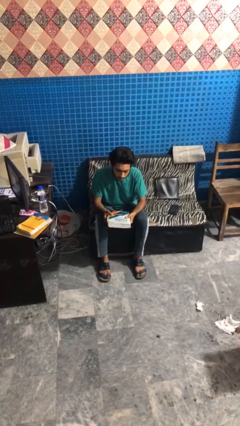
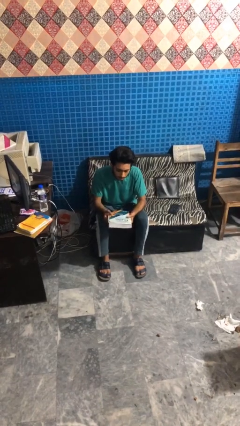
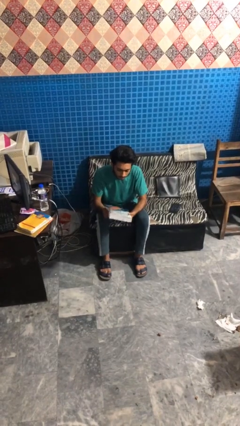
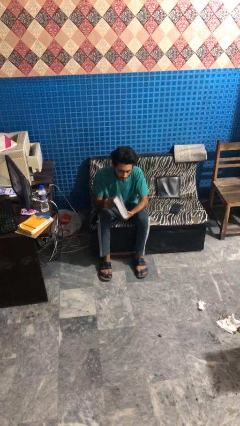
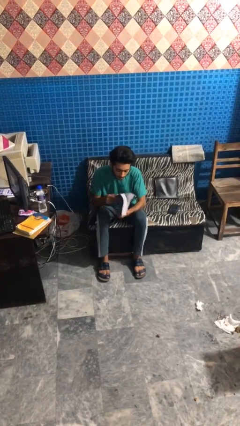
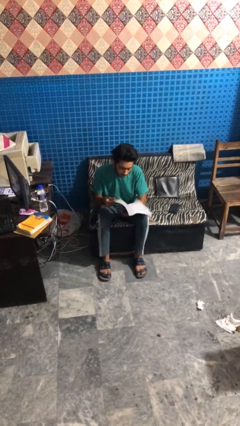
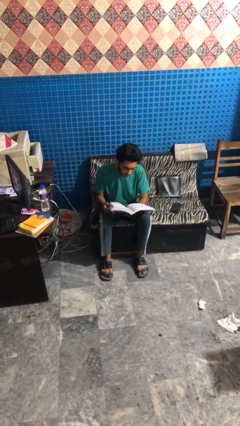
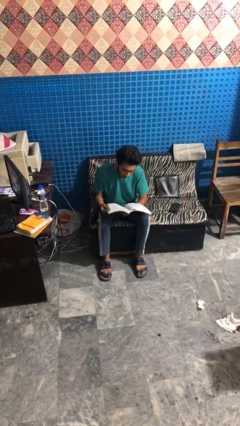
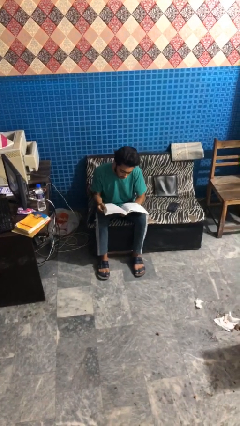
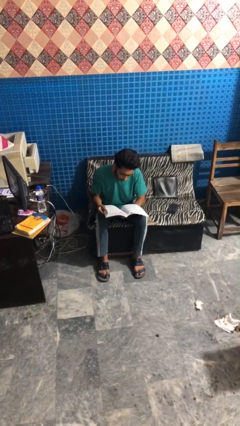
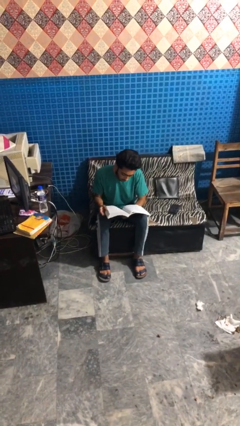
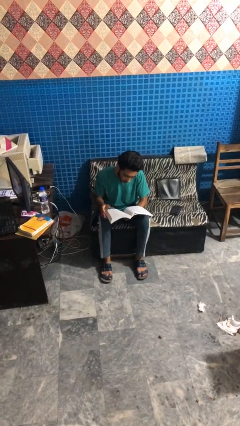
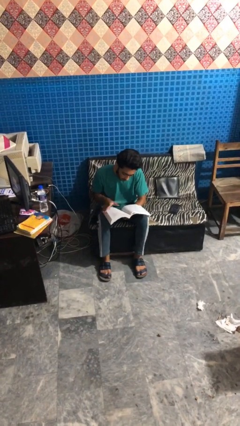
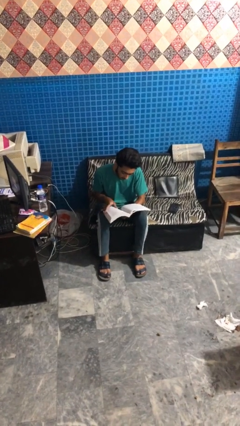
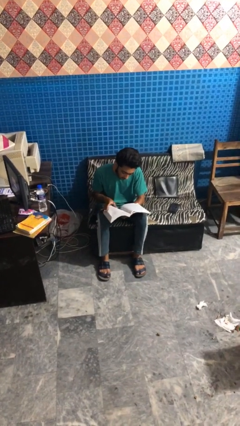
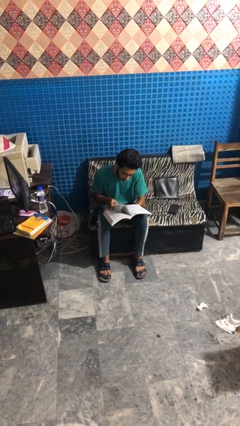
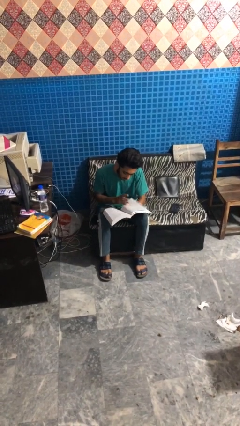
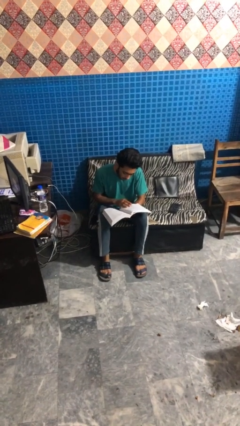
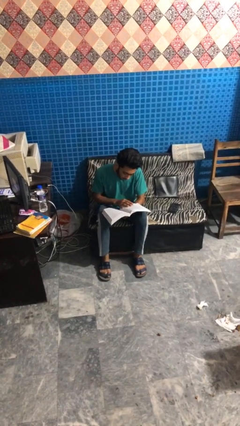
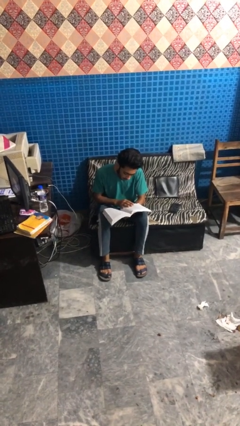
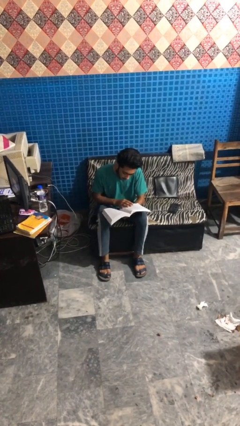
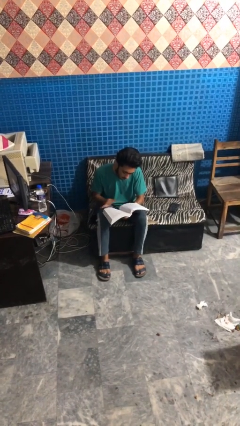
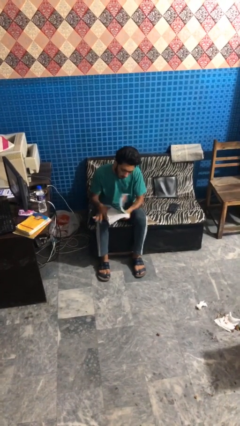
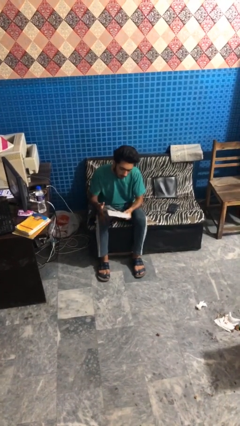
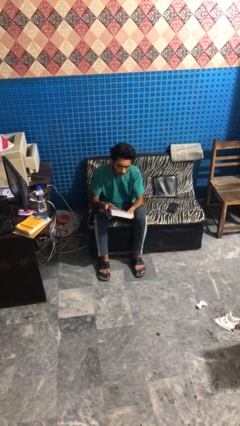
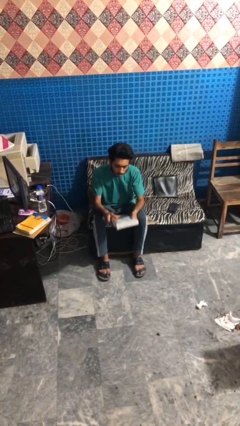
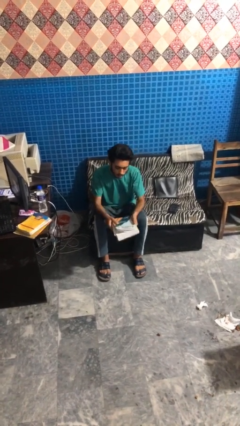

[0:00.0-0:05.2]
person reads book

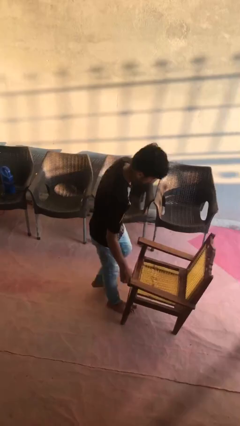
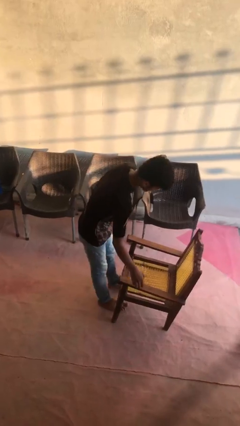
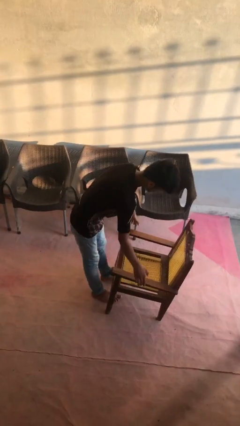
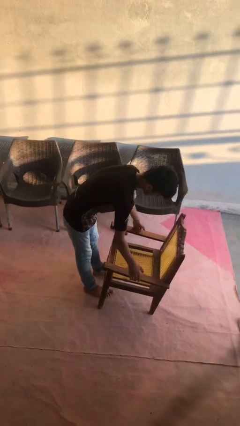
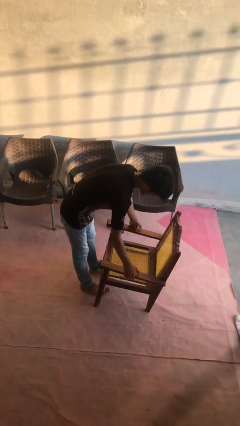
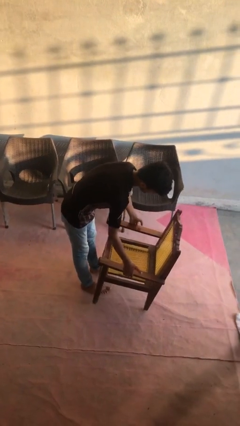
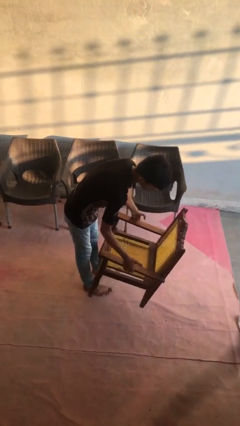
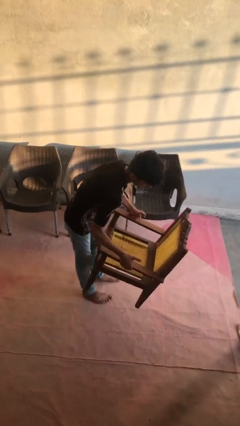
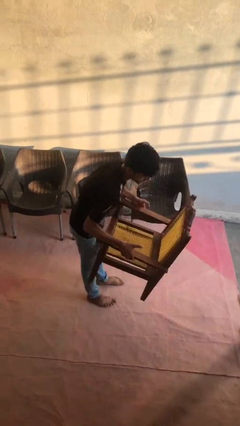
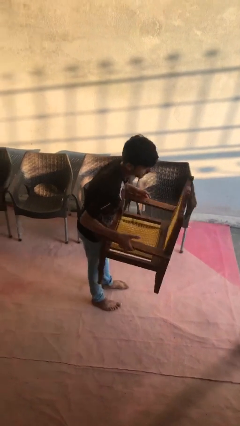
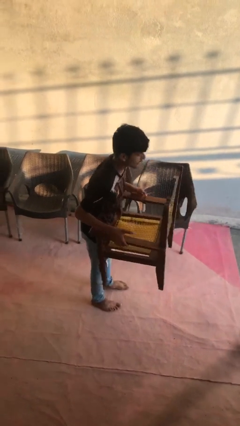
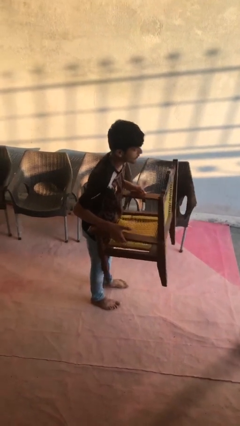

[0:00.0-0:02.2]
person picks up object from floor

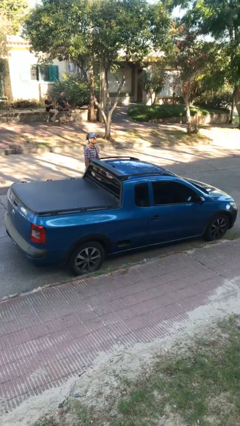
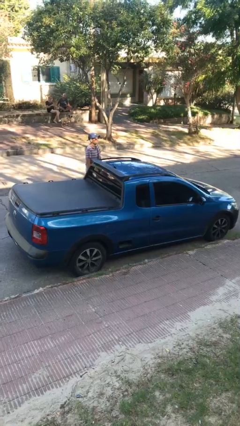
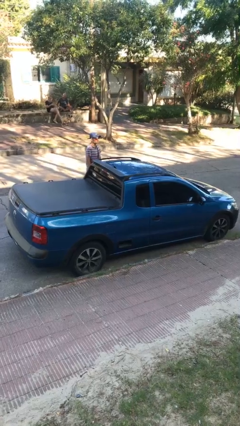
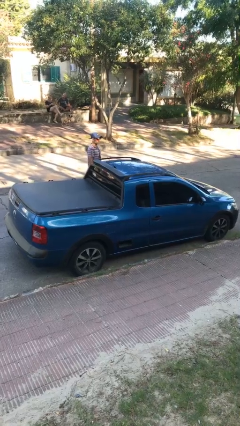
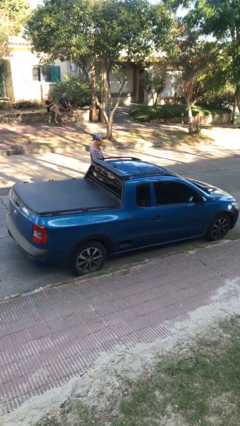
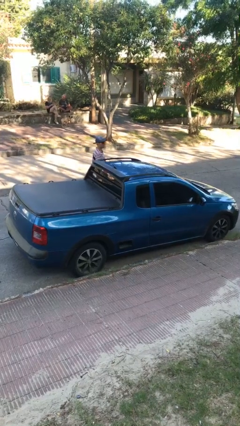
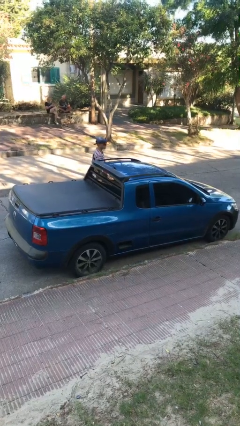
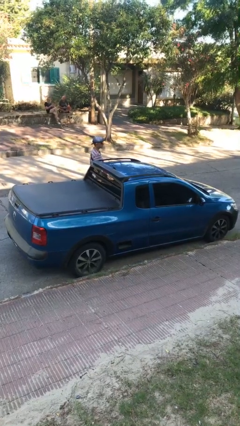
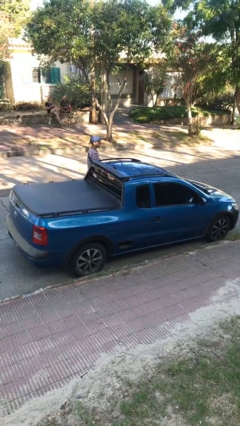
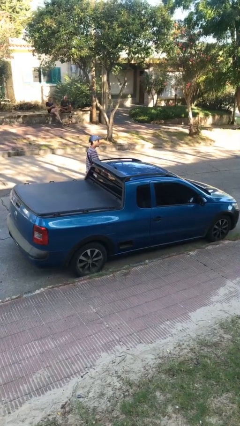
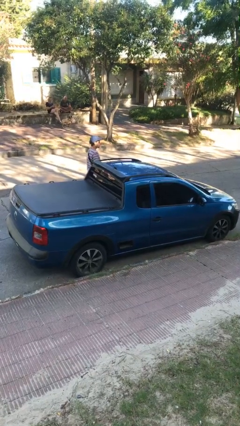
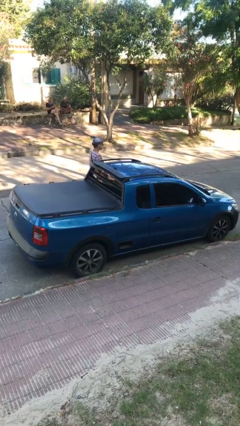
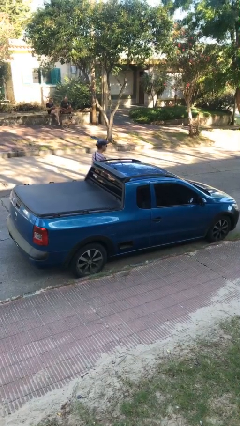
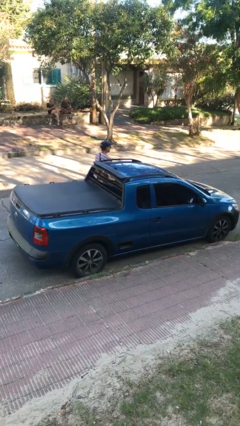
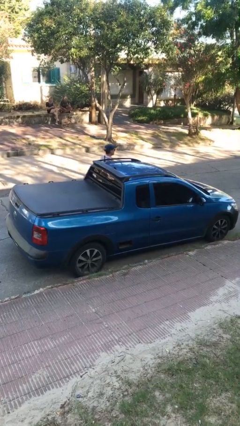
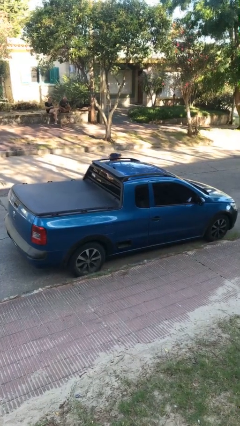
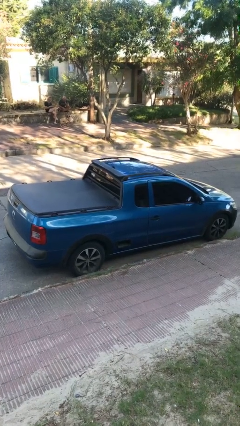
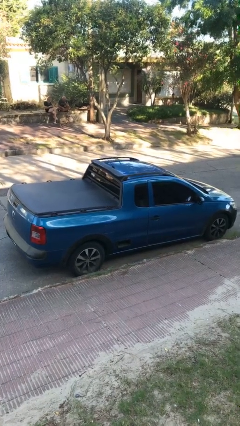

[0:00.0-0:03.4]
car picks up person

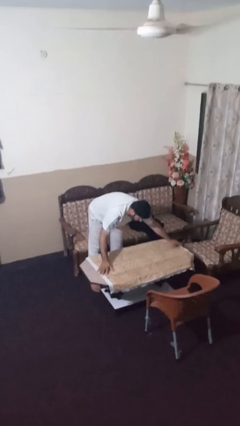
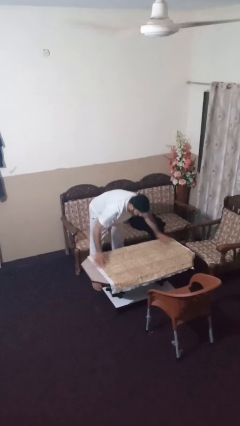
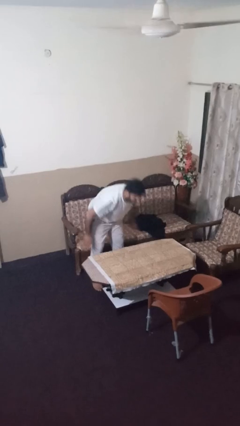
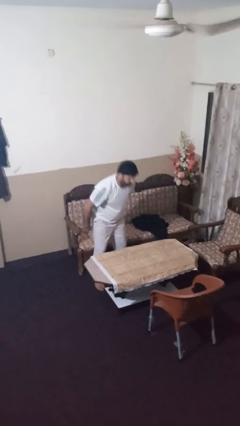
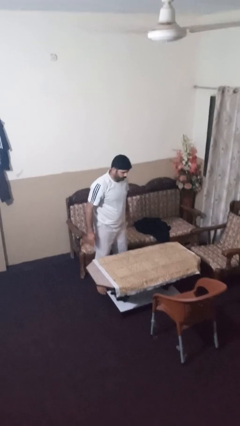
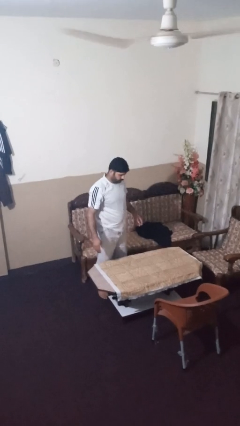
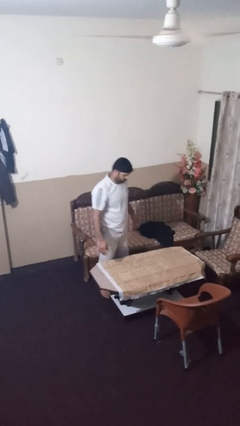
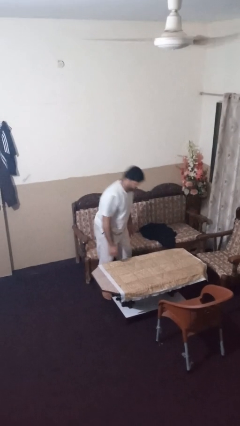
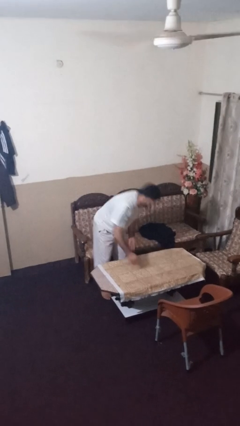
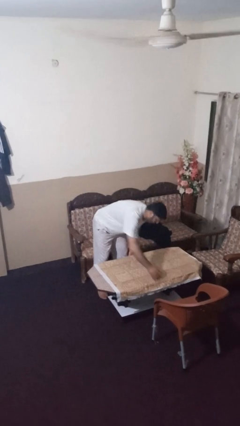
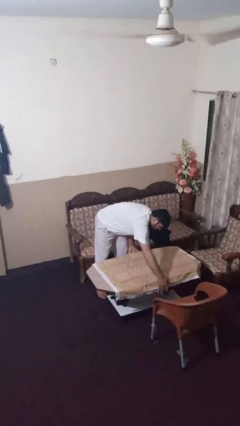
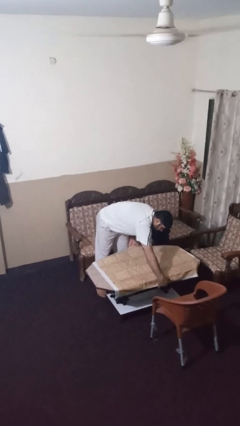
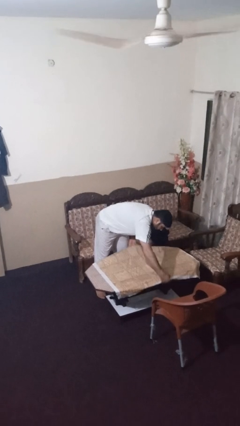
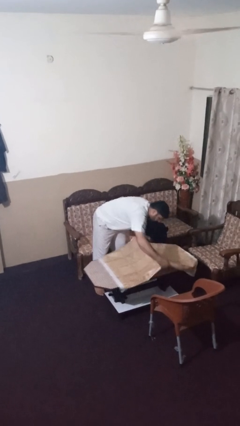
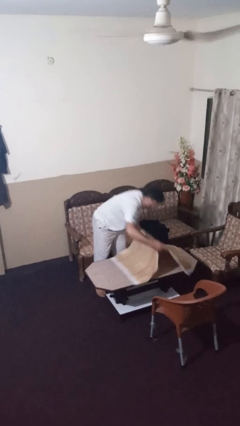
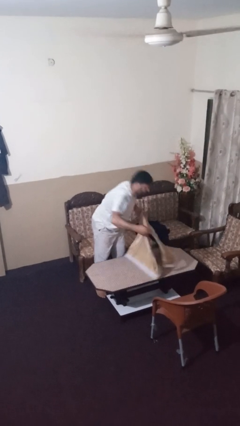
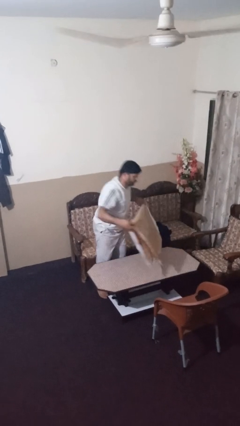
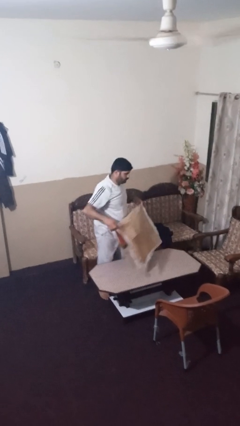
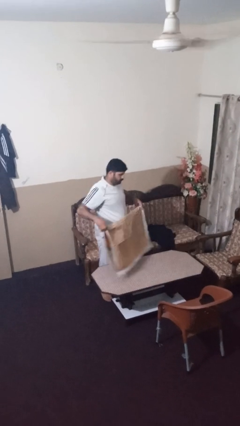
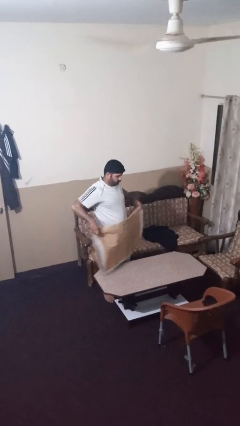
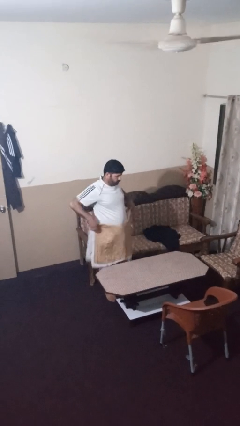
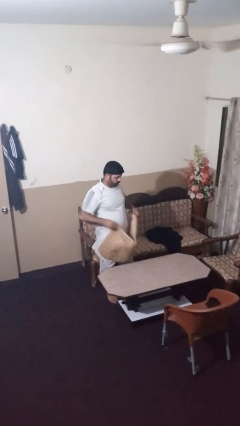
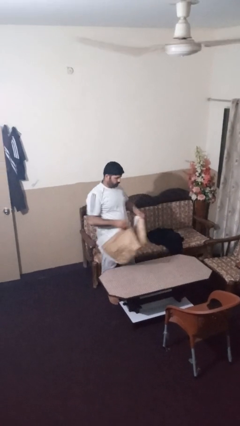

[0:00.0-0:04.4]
person folds tablecloth

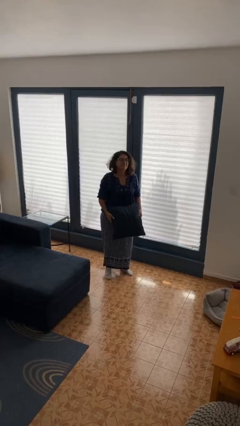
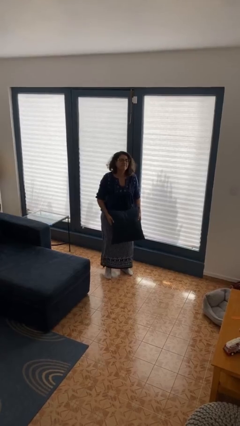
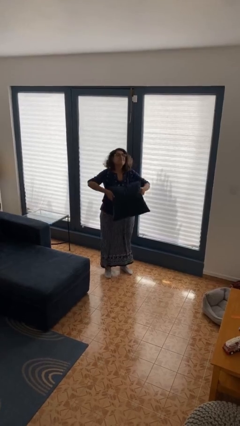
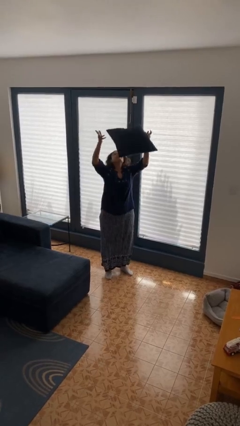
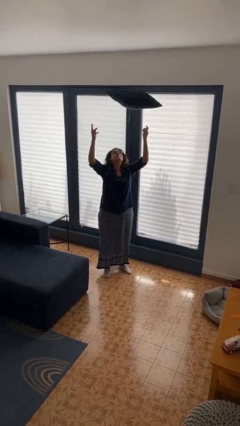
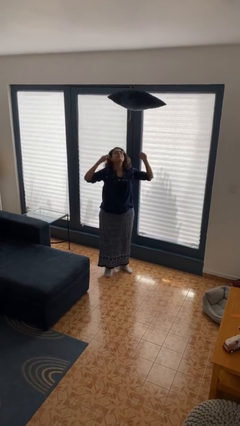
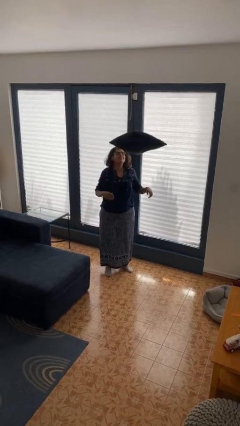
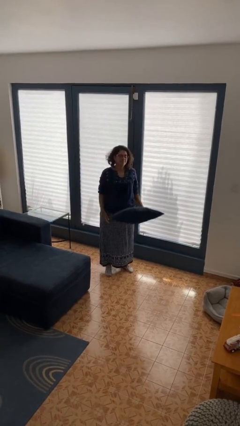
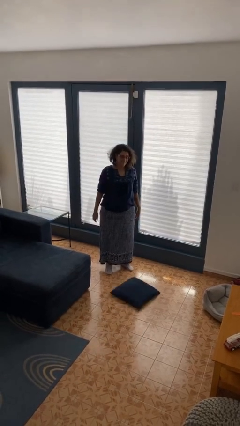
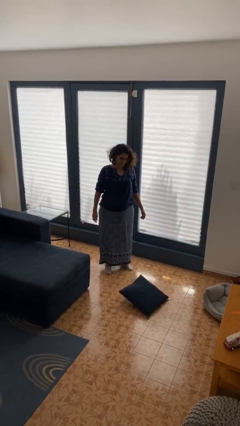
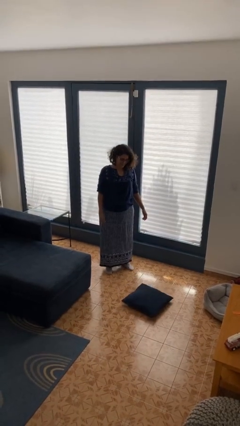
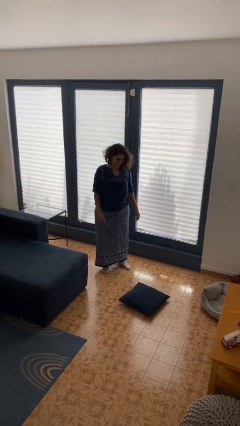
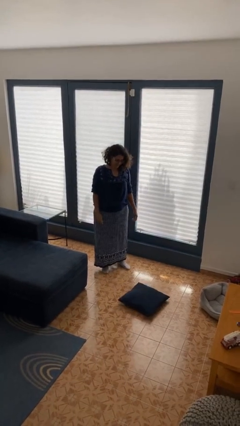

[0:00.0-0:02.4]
person throws object into air
